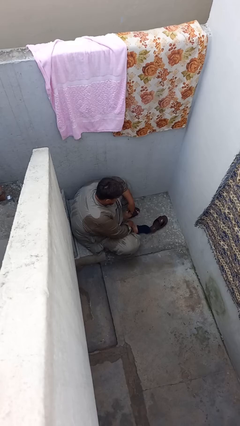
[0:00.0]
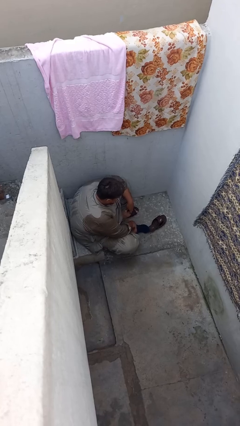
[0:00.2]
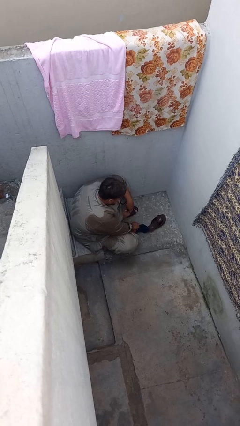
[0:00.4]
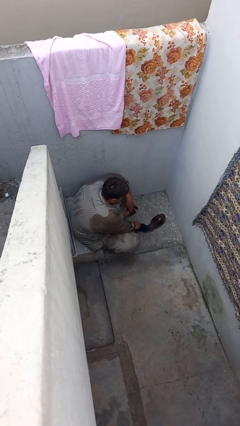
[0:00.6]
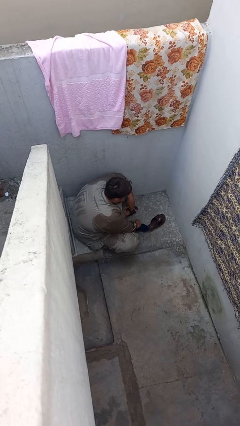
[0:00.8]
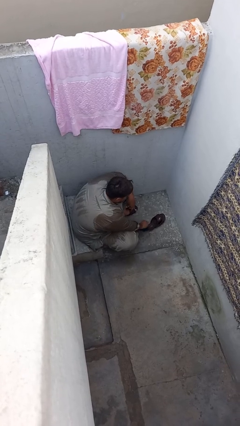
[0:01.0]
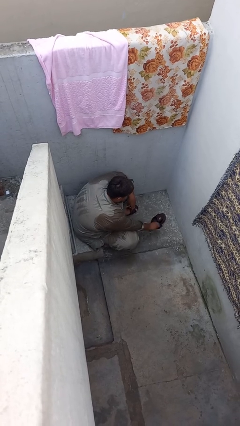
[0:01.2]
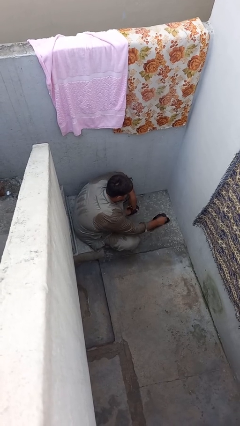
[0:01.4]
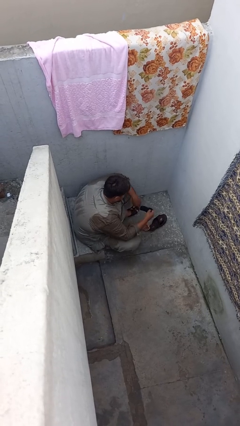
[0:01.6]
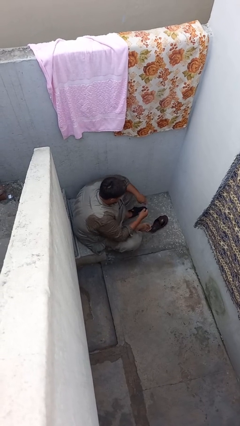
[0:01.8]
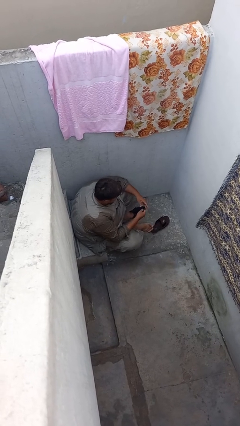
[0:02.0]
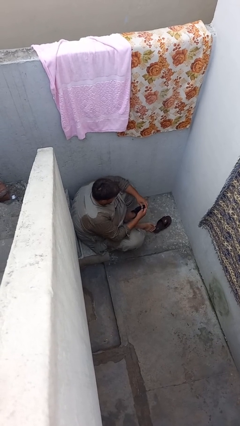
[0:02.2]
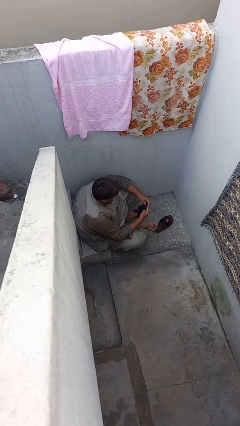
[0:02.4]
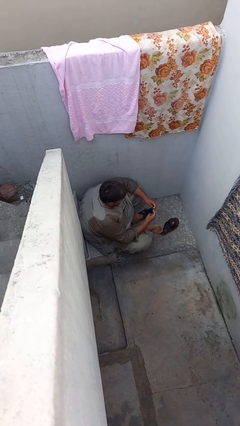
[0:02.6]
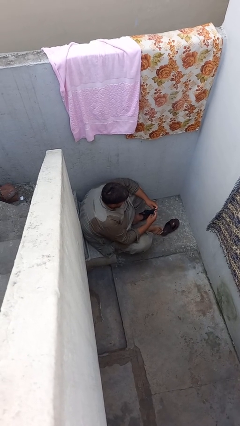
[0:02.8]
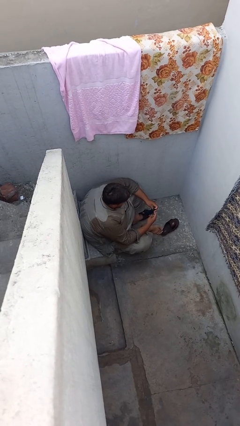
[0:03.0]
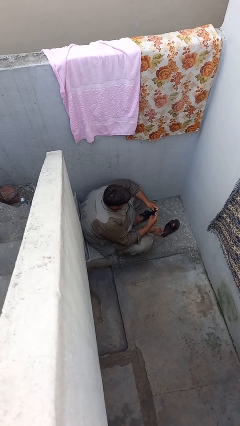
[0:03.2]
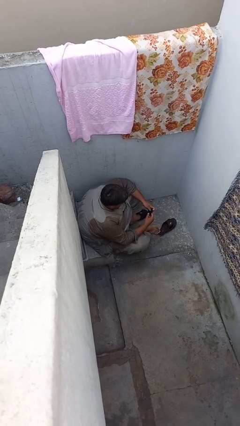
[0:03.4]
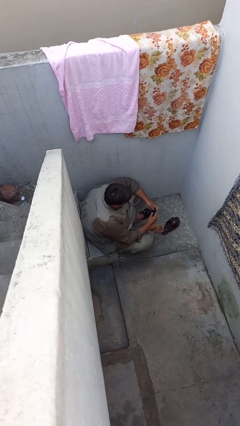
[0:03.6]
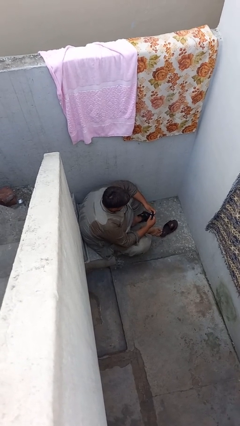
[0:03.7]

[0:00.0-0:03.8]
person takes off socks

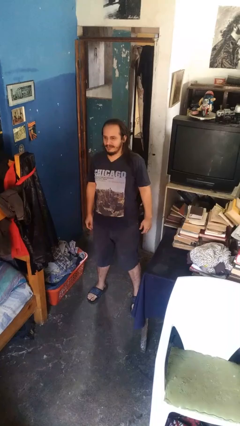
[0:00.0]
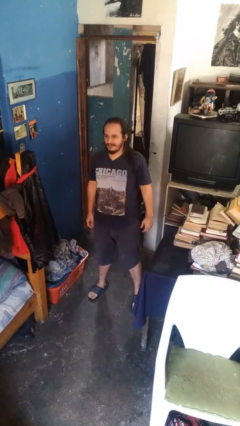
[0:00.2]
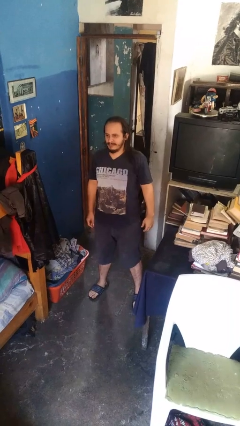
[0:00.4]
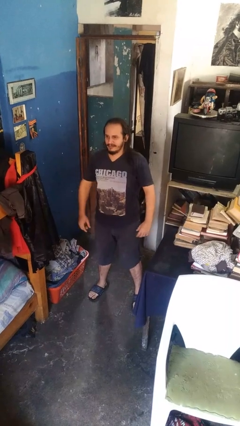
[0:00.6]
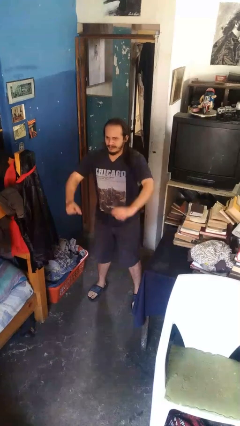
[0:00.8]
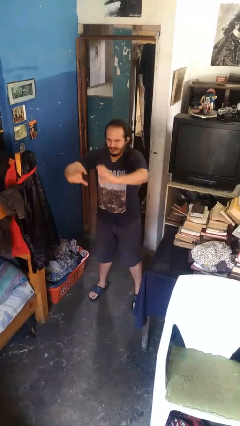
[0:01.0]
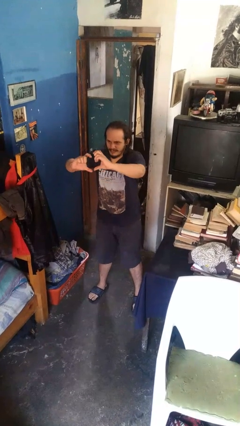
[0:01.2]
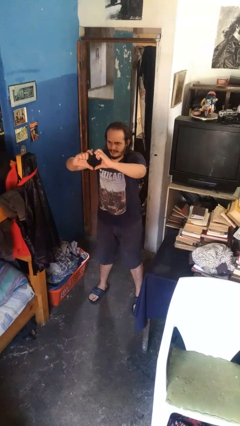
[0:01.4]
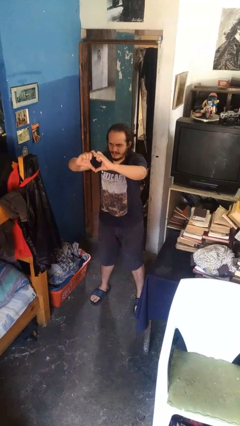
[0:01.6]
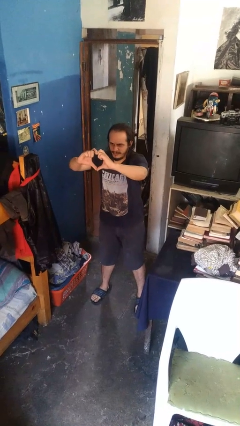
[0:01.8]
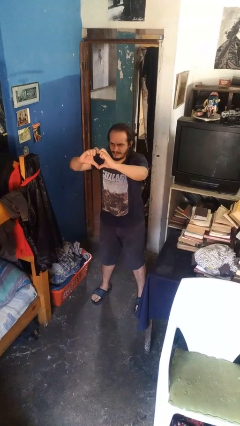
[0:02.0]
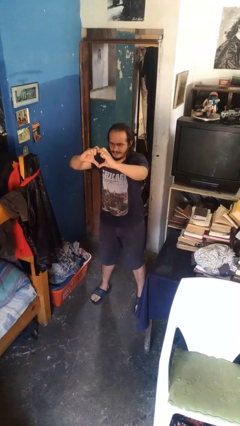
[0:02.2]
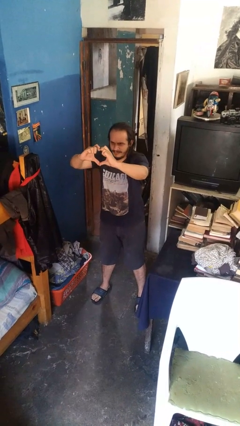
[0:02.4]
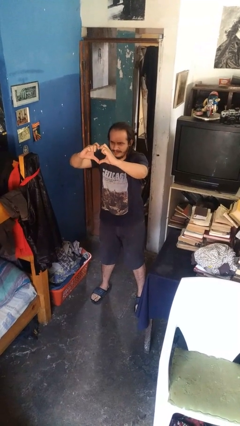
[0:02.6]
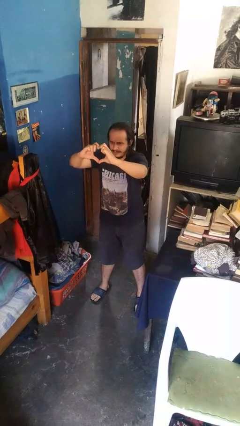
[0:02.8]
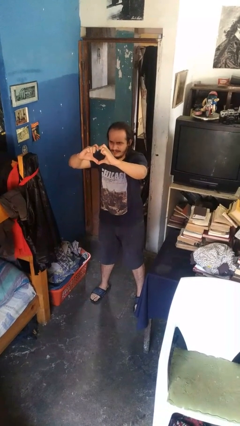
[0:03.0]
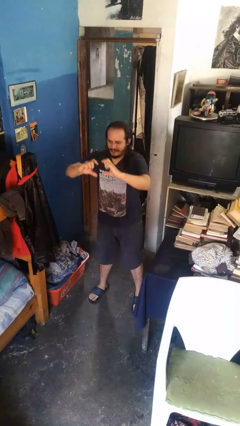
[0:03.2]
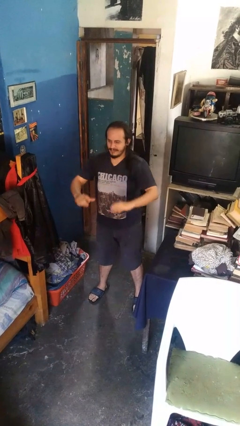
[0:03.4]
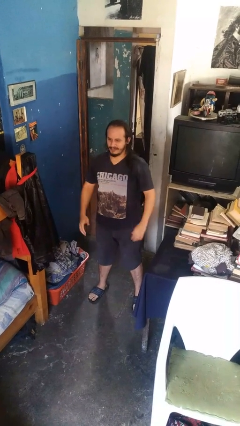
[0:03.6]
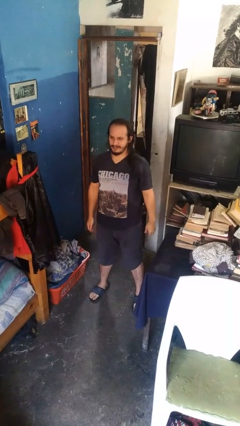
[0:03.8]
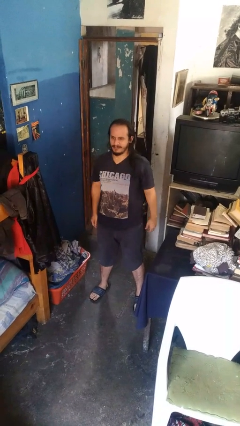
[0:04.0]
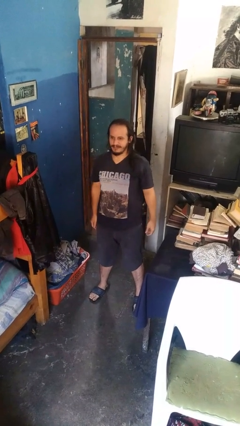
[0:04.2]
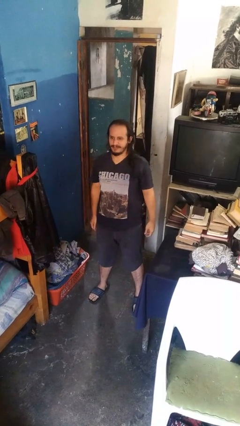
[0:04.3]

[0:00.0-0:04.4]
person gestures heart

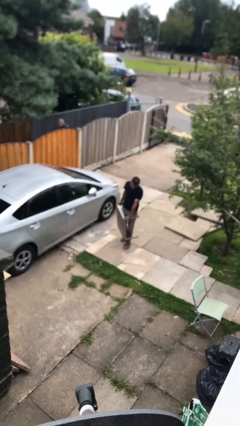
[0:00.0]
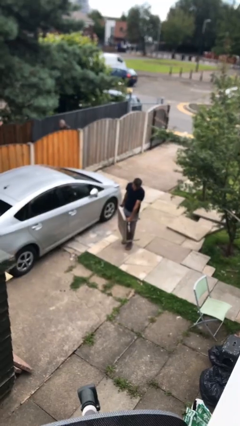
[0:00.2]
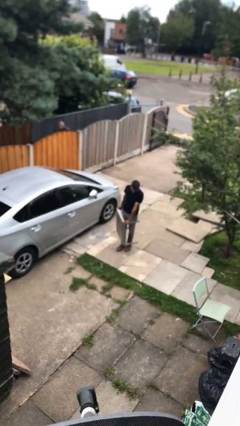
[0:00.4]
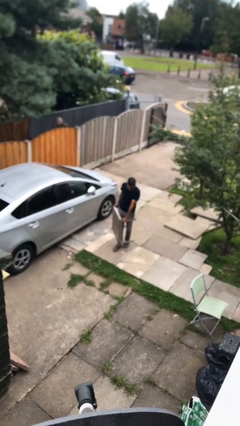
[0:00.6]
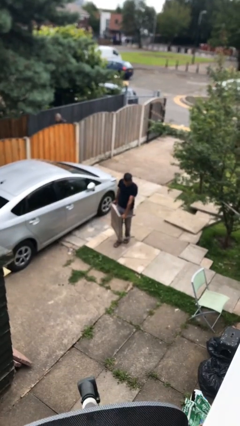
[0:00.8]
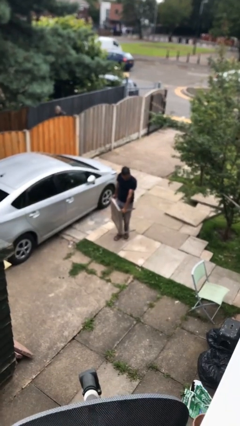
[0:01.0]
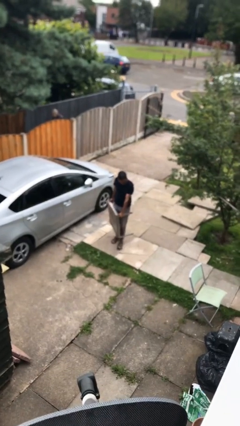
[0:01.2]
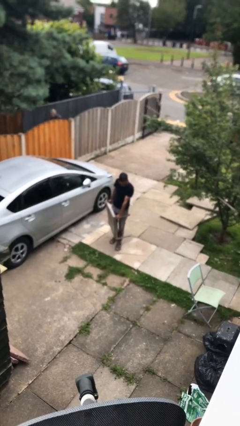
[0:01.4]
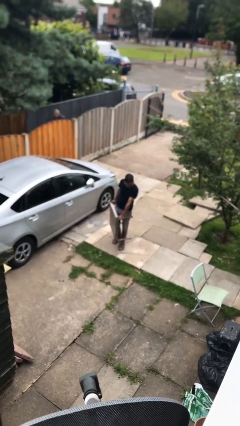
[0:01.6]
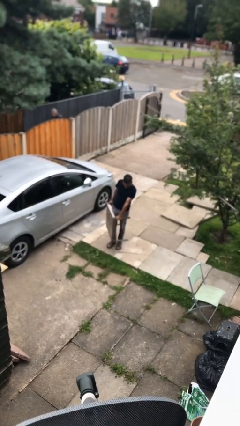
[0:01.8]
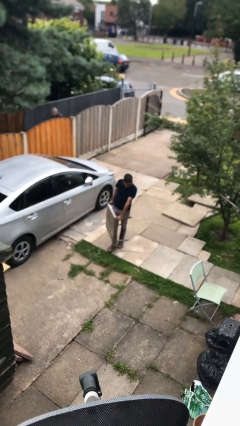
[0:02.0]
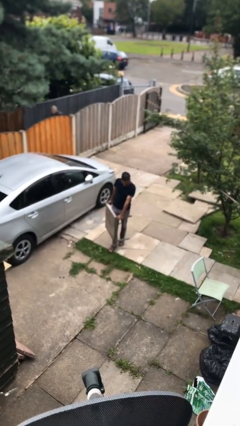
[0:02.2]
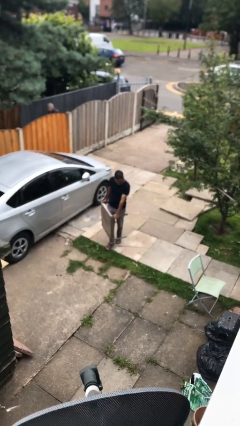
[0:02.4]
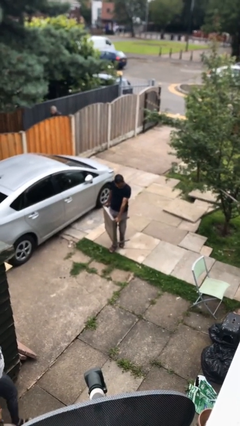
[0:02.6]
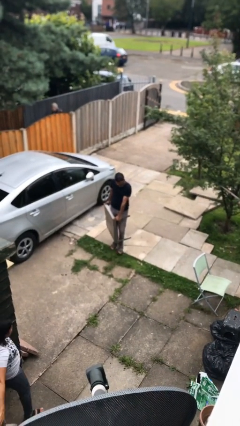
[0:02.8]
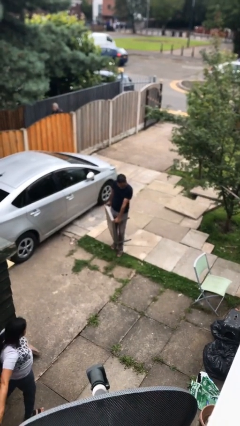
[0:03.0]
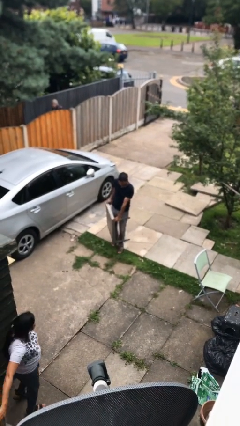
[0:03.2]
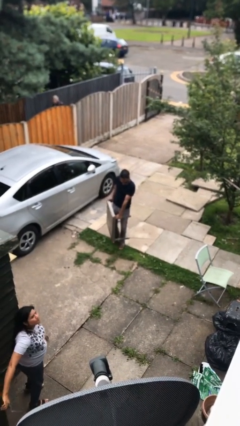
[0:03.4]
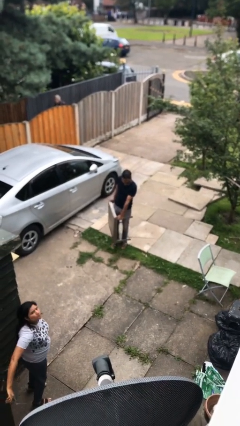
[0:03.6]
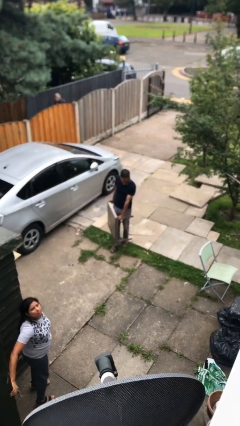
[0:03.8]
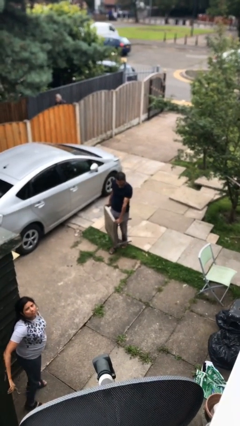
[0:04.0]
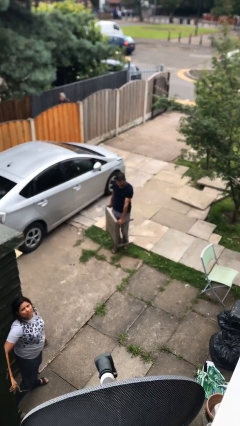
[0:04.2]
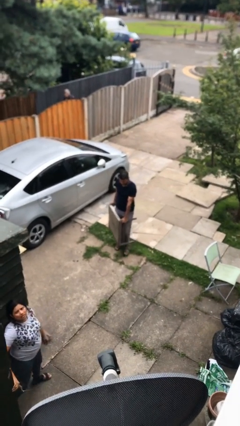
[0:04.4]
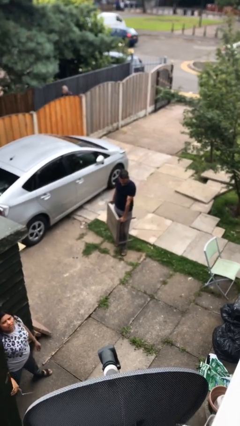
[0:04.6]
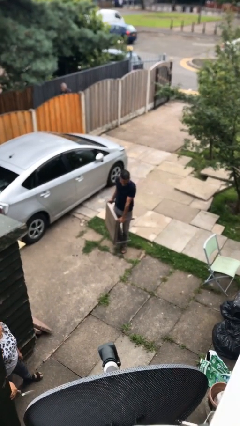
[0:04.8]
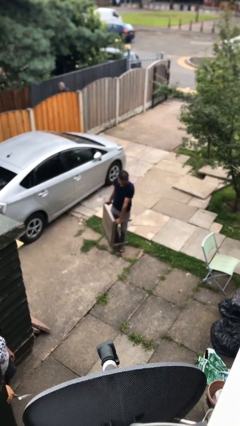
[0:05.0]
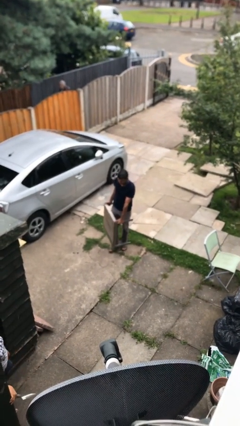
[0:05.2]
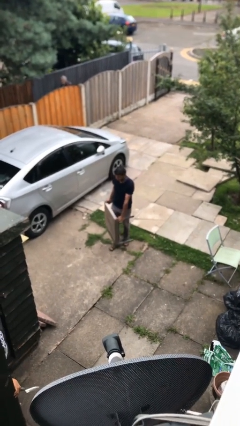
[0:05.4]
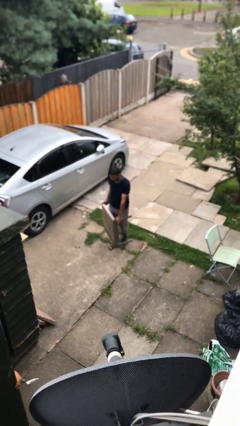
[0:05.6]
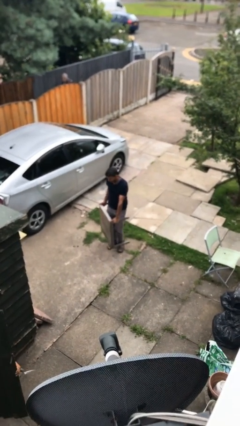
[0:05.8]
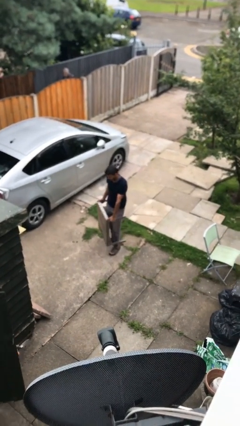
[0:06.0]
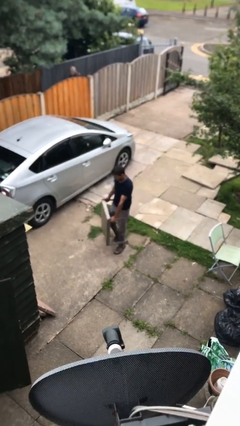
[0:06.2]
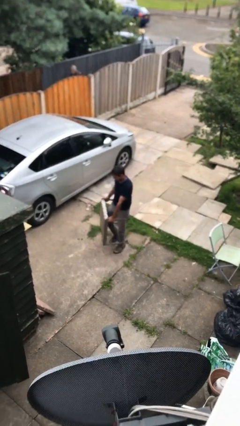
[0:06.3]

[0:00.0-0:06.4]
person carries heavy object

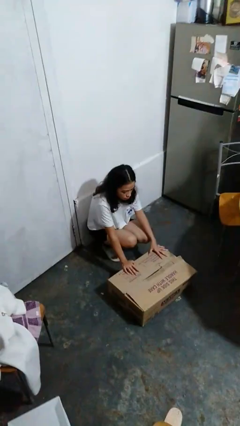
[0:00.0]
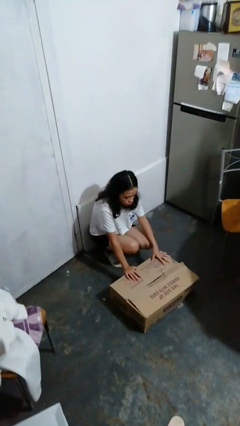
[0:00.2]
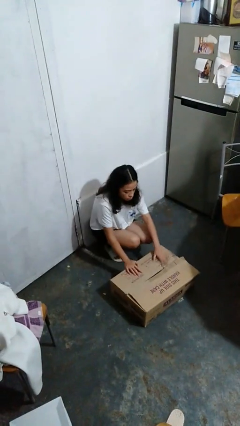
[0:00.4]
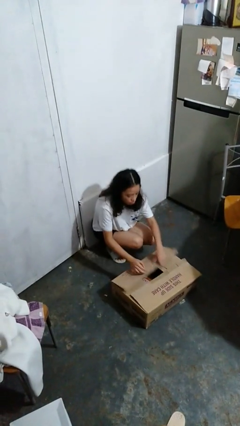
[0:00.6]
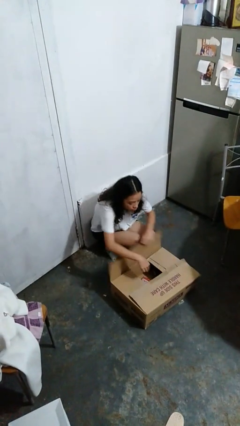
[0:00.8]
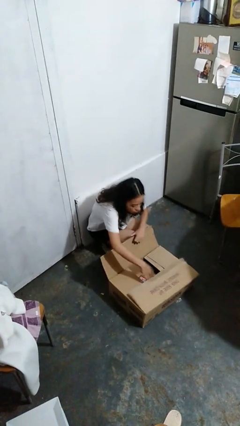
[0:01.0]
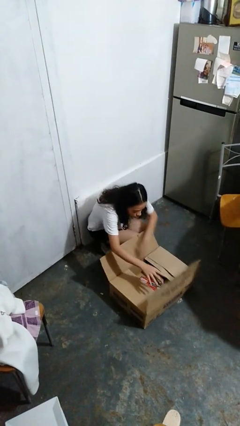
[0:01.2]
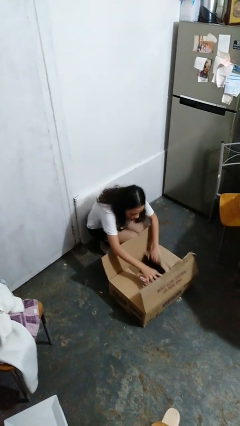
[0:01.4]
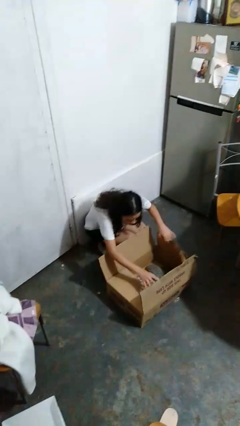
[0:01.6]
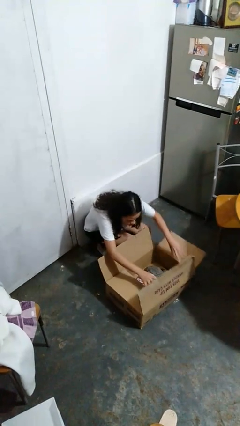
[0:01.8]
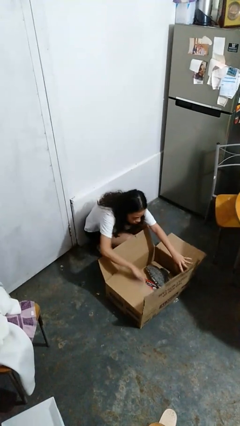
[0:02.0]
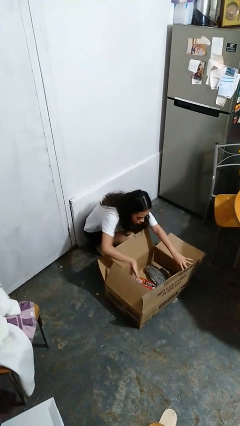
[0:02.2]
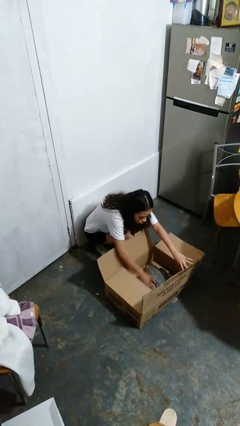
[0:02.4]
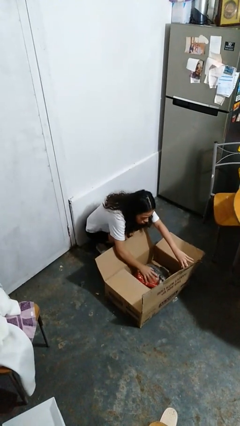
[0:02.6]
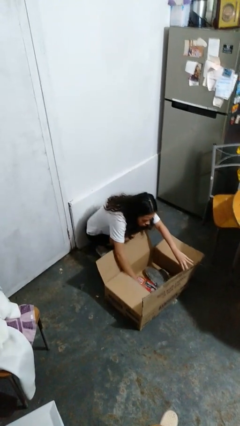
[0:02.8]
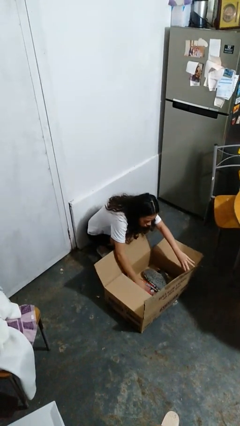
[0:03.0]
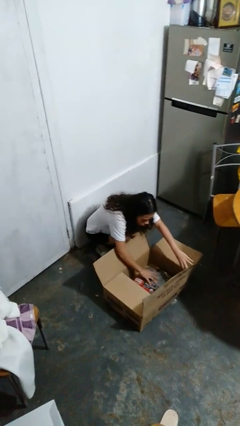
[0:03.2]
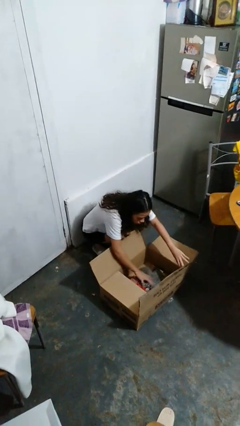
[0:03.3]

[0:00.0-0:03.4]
person searches in box
